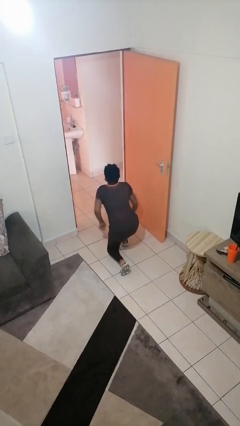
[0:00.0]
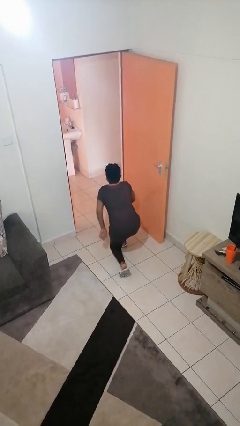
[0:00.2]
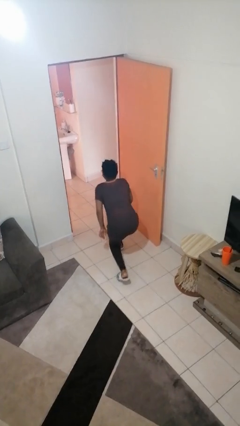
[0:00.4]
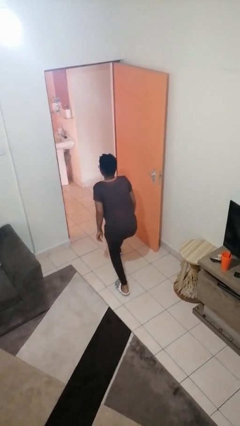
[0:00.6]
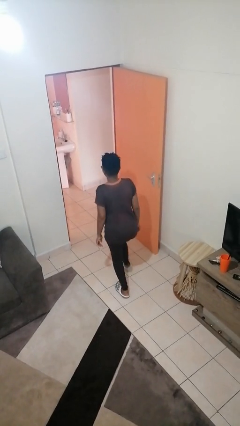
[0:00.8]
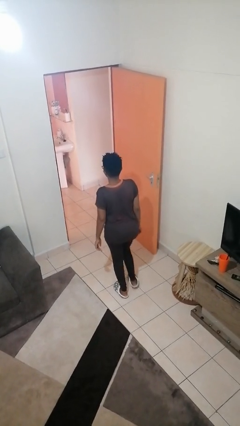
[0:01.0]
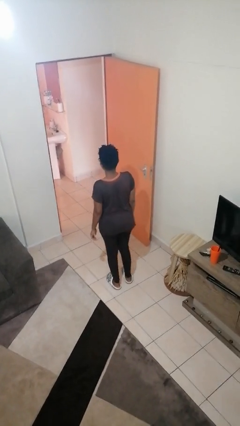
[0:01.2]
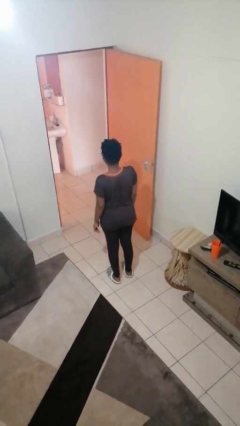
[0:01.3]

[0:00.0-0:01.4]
person stands up from floor

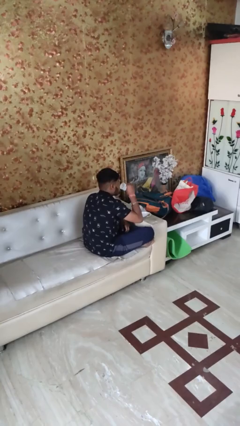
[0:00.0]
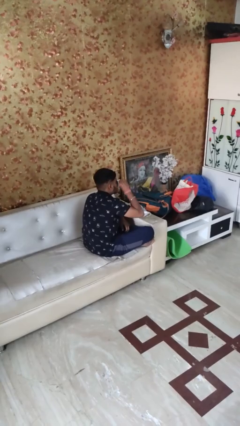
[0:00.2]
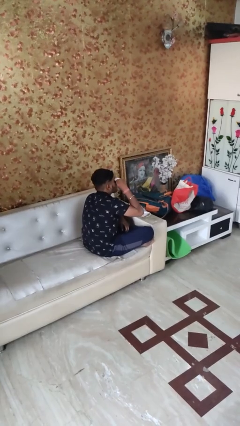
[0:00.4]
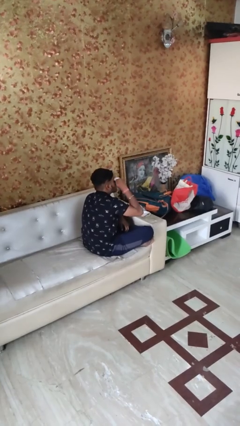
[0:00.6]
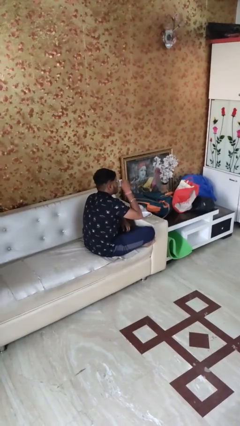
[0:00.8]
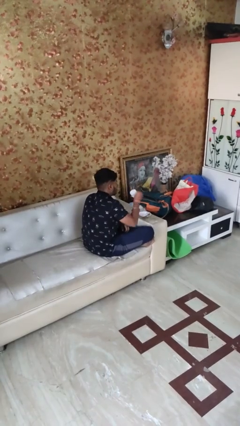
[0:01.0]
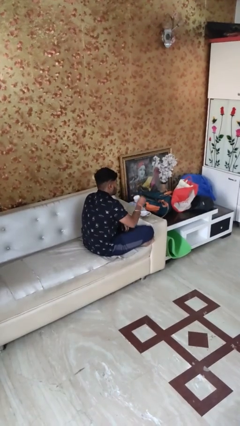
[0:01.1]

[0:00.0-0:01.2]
person drinks from mug

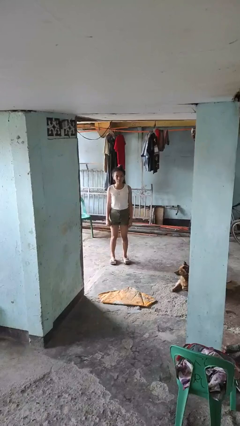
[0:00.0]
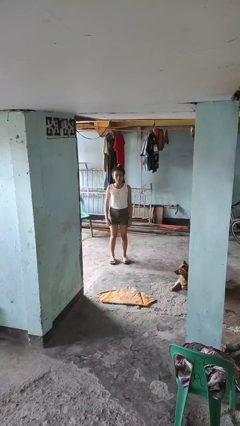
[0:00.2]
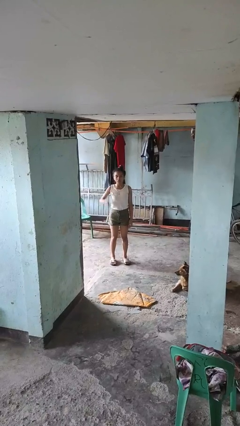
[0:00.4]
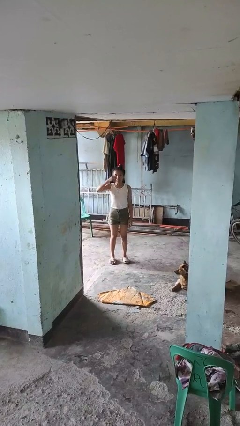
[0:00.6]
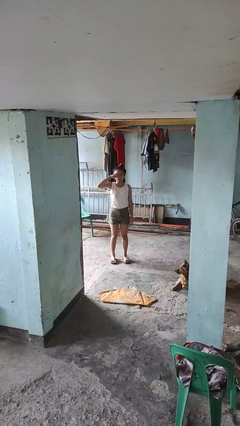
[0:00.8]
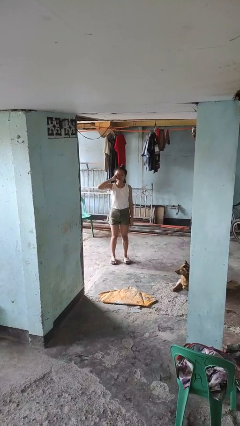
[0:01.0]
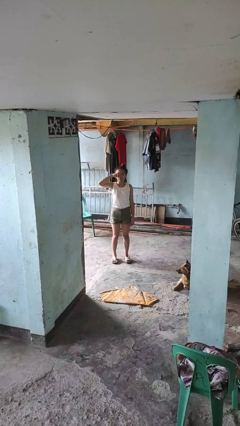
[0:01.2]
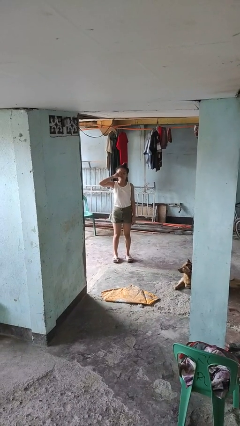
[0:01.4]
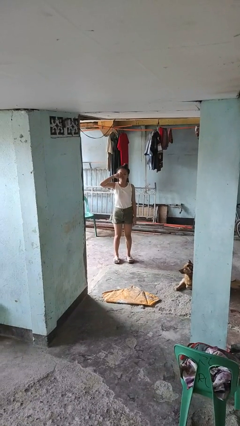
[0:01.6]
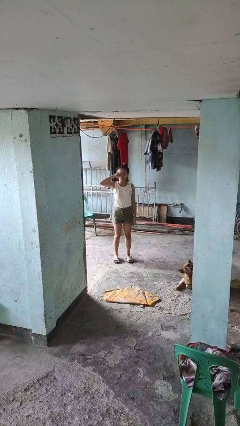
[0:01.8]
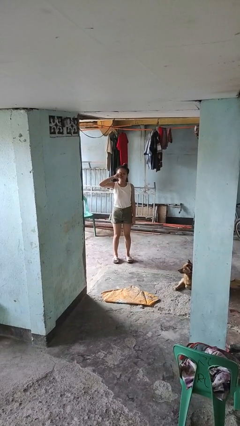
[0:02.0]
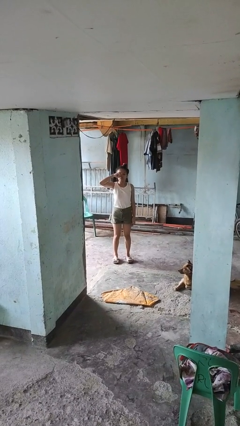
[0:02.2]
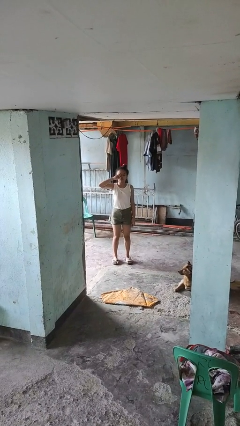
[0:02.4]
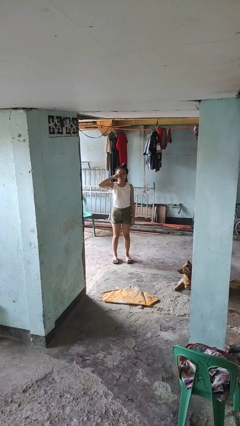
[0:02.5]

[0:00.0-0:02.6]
person rubs eyes

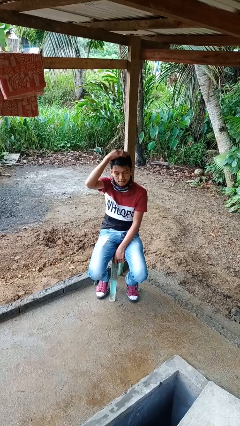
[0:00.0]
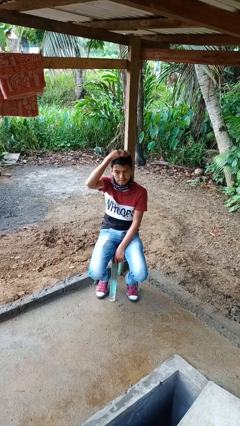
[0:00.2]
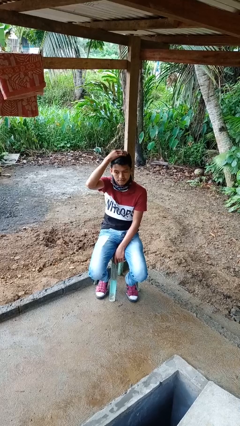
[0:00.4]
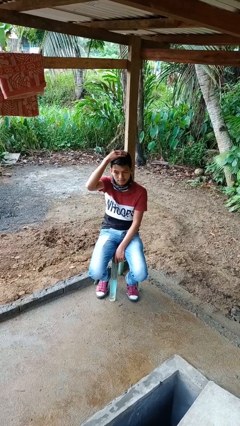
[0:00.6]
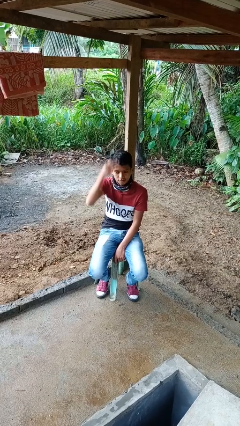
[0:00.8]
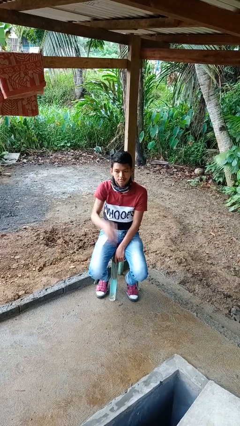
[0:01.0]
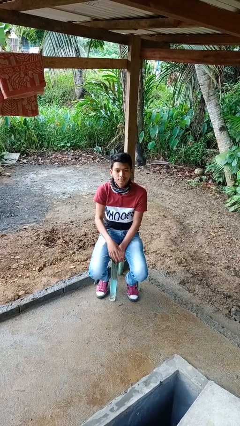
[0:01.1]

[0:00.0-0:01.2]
person pats head

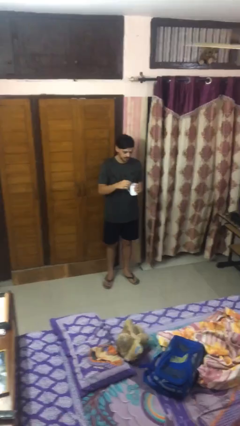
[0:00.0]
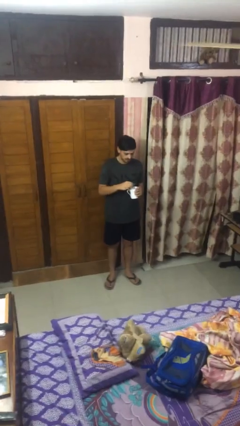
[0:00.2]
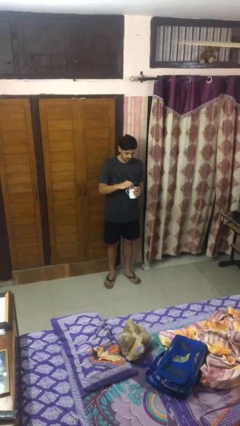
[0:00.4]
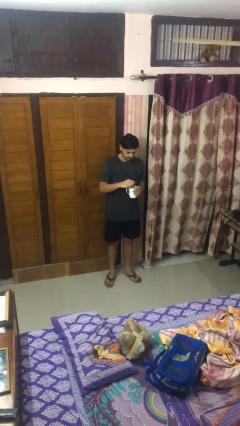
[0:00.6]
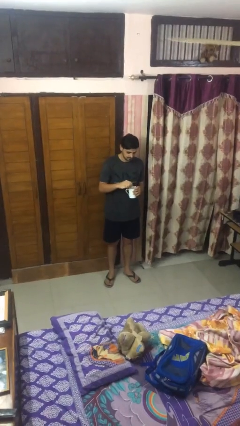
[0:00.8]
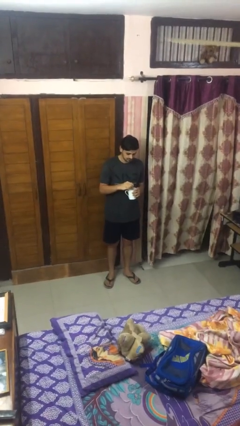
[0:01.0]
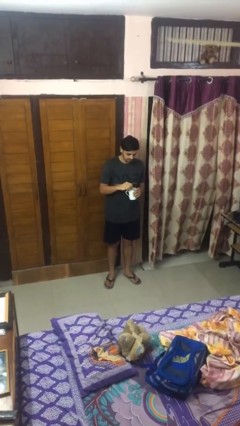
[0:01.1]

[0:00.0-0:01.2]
person stirs mug

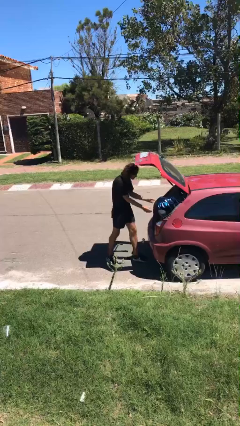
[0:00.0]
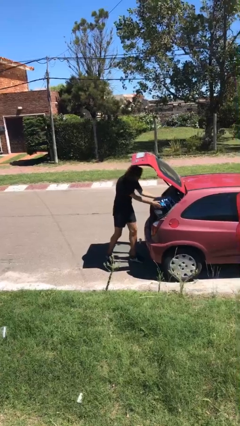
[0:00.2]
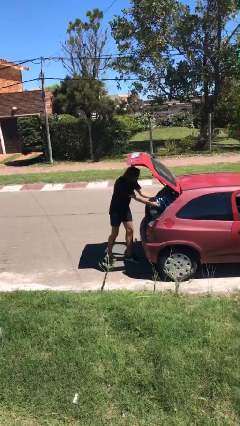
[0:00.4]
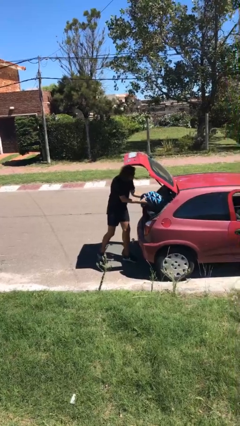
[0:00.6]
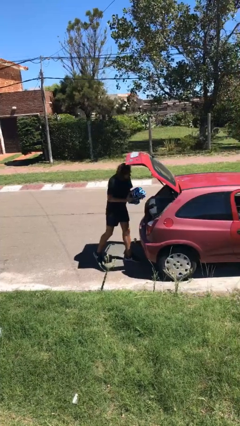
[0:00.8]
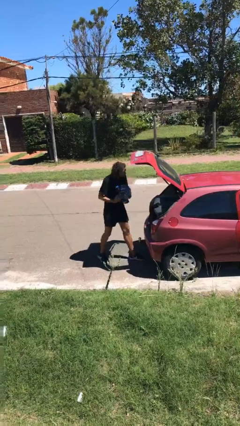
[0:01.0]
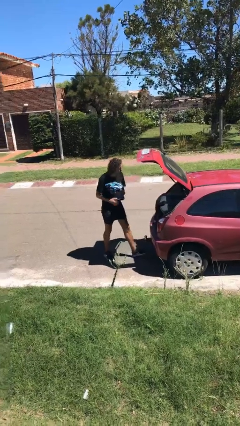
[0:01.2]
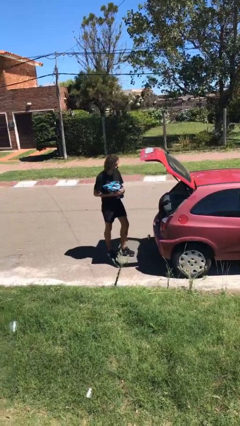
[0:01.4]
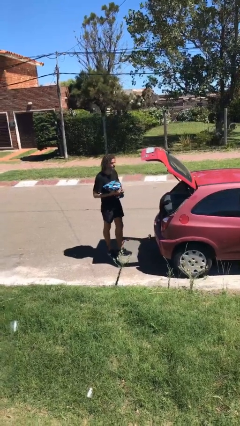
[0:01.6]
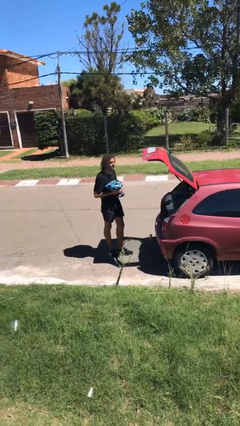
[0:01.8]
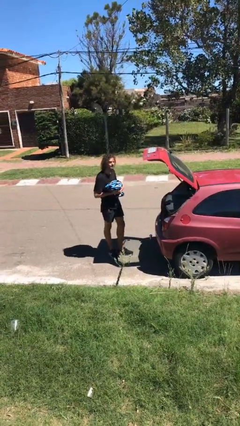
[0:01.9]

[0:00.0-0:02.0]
person unloads car

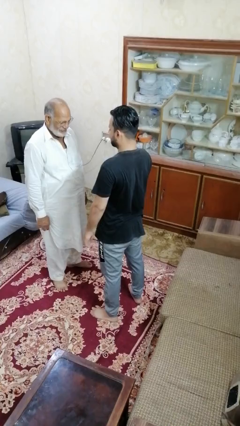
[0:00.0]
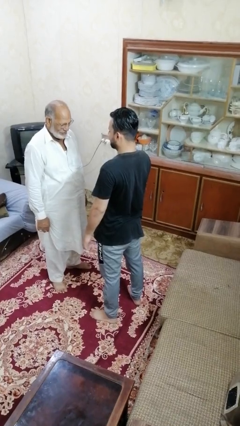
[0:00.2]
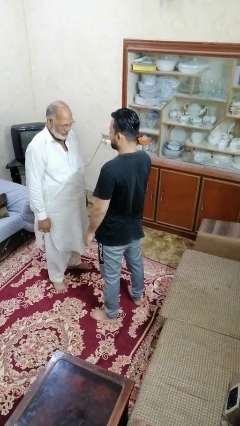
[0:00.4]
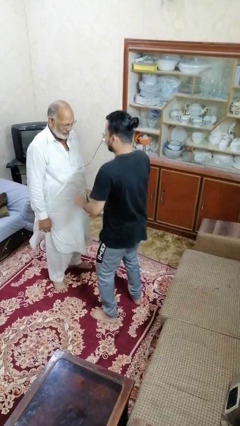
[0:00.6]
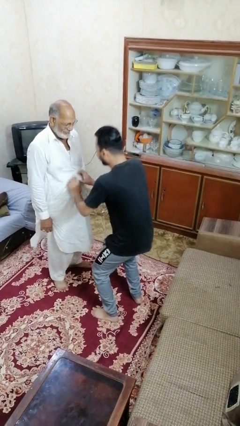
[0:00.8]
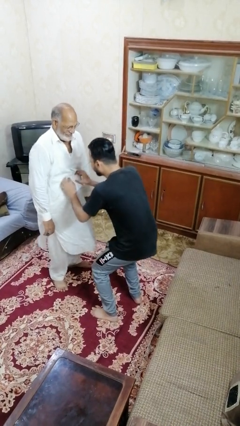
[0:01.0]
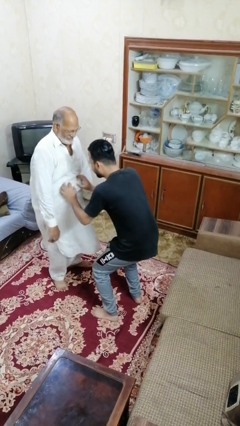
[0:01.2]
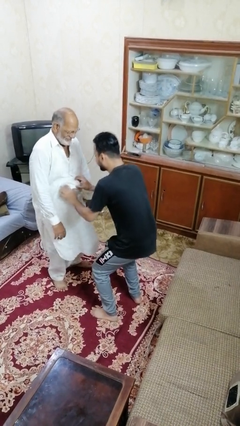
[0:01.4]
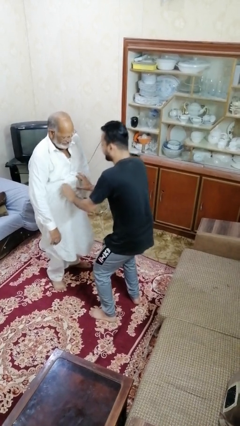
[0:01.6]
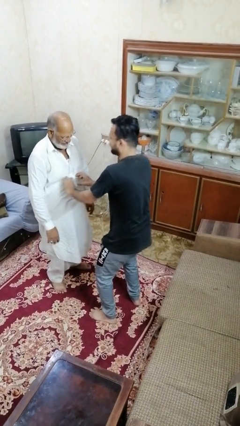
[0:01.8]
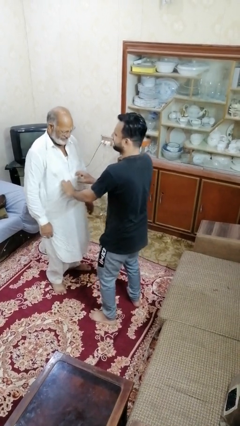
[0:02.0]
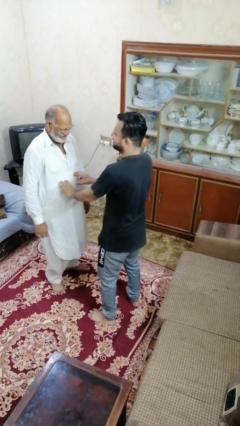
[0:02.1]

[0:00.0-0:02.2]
person tickles person

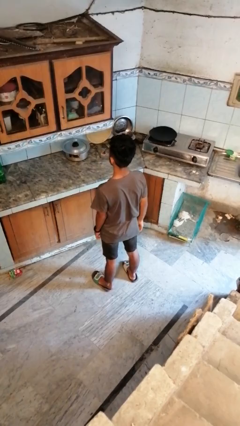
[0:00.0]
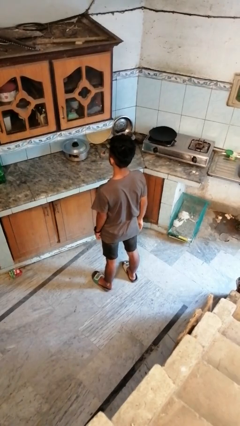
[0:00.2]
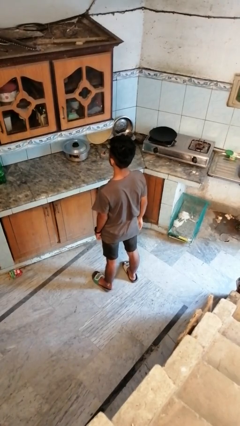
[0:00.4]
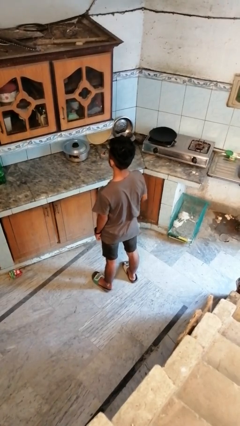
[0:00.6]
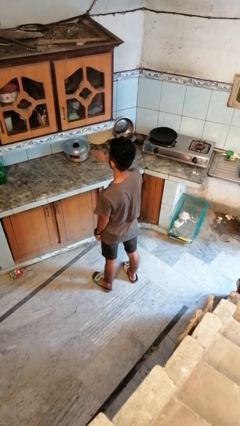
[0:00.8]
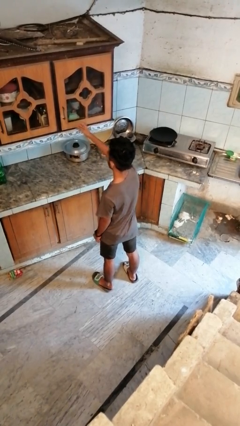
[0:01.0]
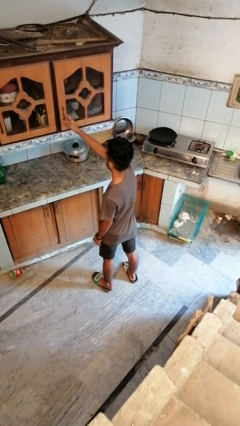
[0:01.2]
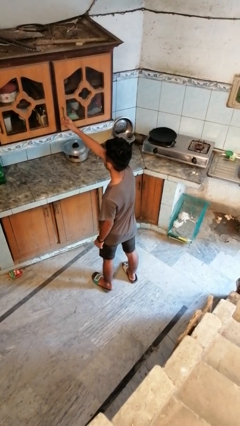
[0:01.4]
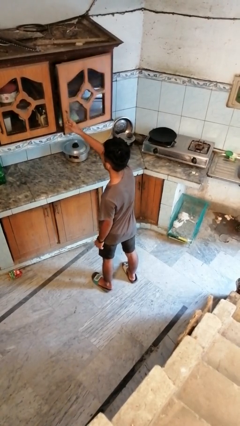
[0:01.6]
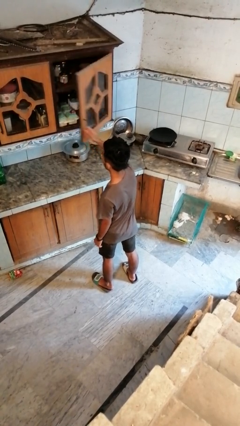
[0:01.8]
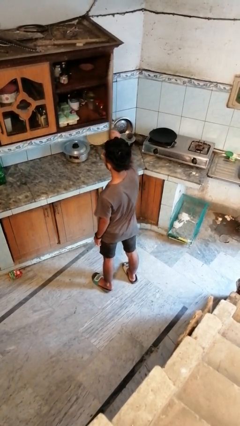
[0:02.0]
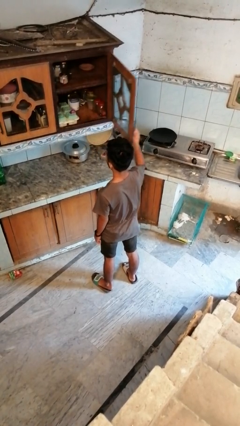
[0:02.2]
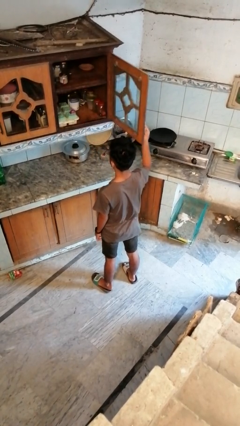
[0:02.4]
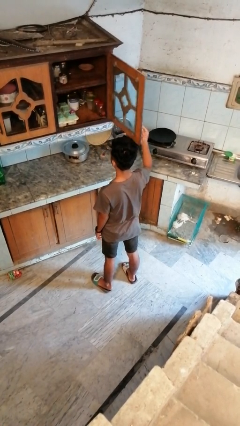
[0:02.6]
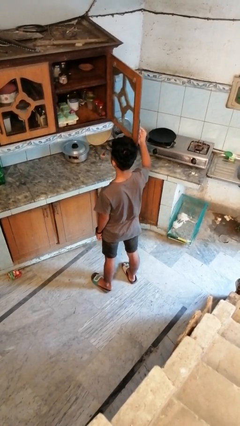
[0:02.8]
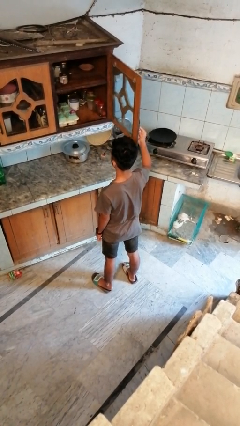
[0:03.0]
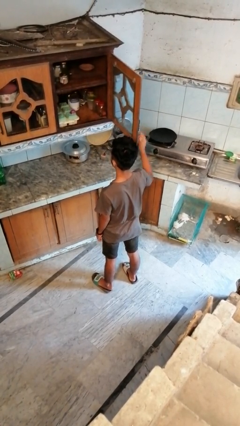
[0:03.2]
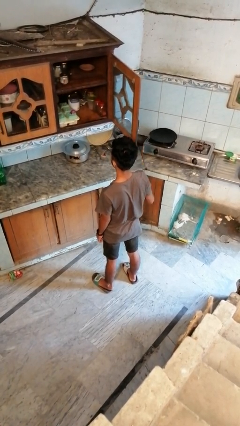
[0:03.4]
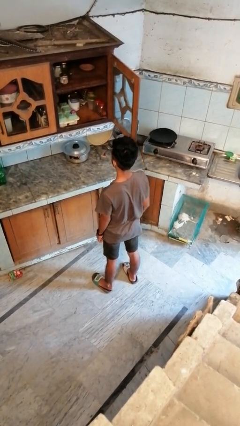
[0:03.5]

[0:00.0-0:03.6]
person opens cabinet

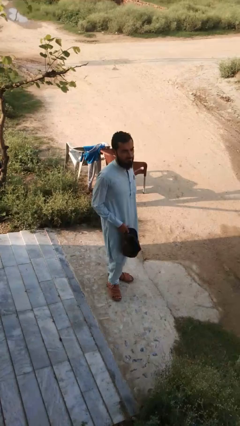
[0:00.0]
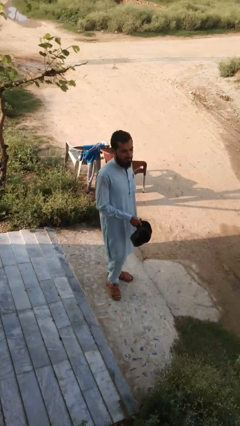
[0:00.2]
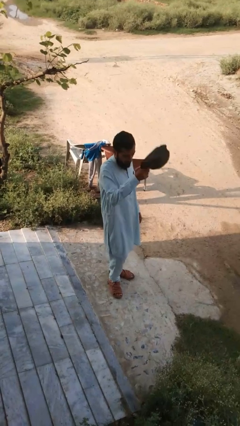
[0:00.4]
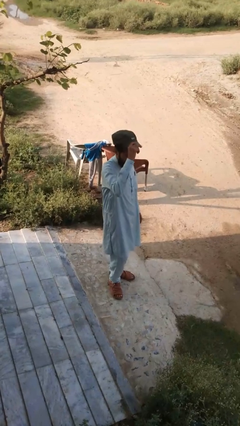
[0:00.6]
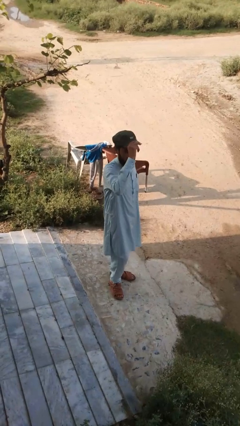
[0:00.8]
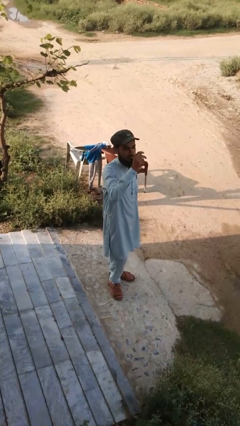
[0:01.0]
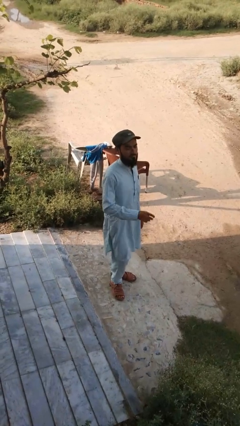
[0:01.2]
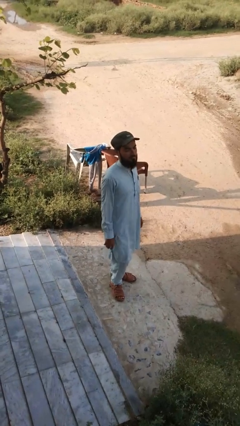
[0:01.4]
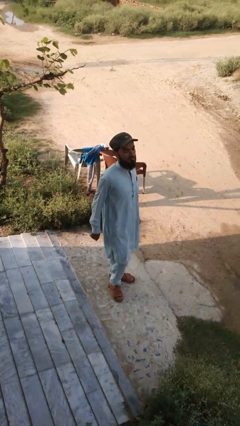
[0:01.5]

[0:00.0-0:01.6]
person puts on hat
